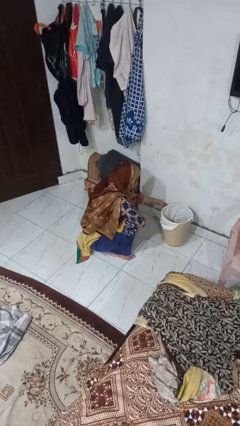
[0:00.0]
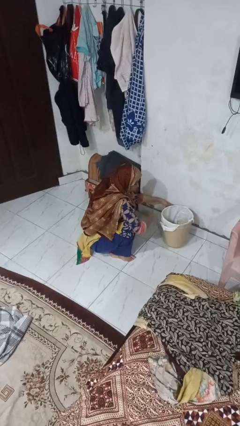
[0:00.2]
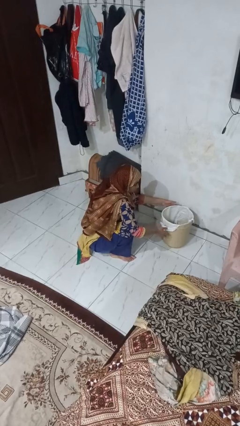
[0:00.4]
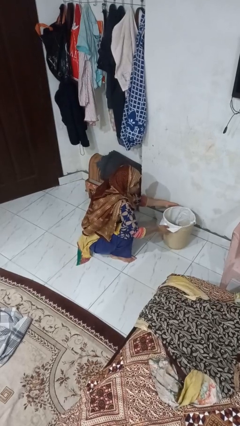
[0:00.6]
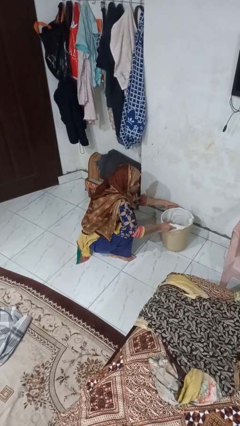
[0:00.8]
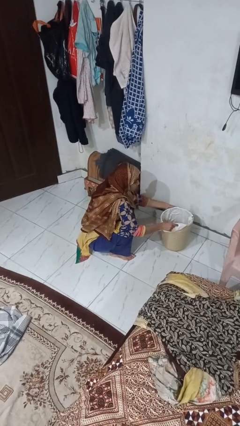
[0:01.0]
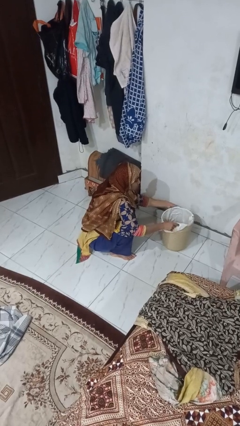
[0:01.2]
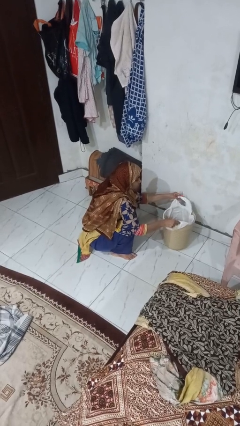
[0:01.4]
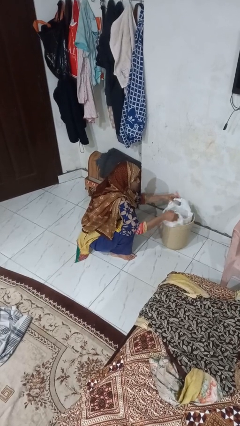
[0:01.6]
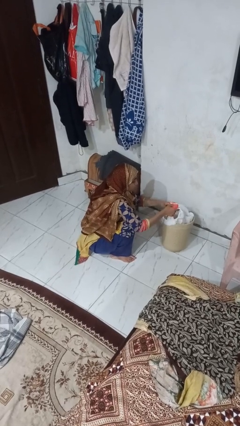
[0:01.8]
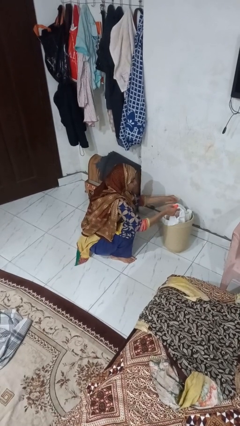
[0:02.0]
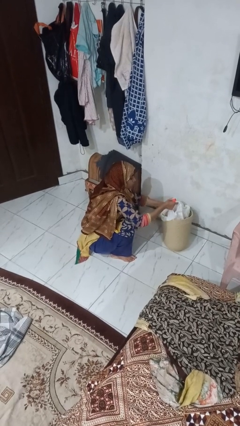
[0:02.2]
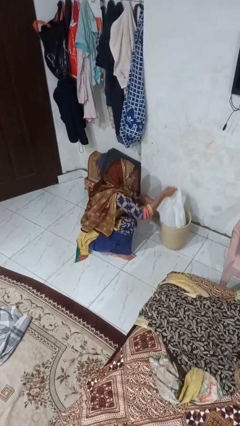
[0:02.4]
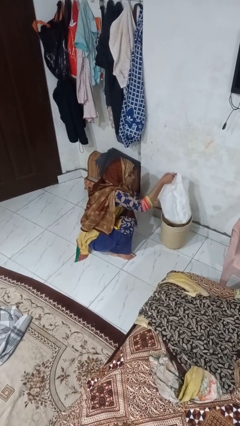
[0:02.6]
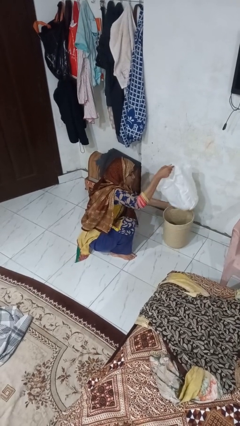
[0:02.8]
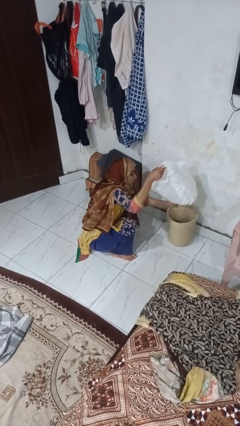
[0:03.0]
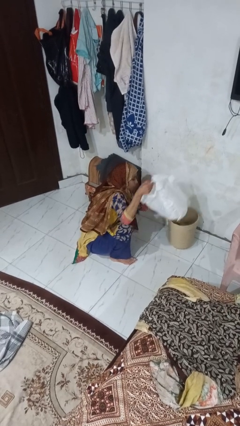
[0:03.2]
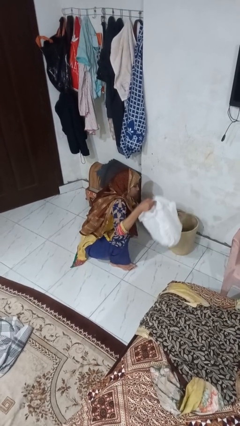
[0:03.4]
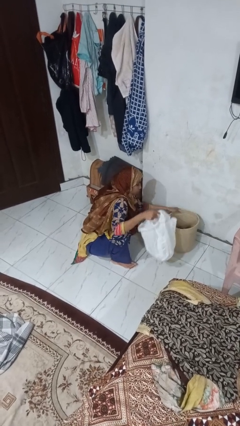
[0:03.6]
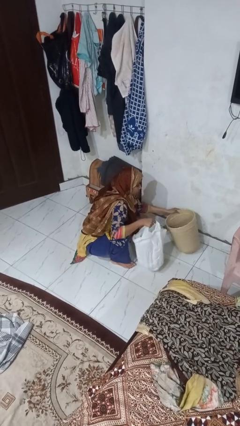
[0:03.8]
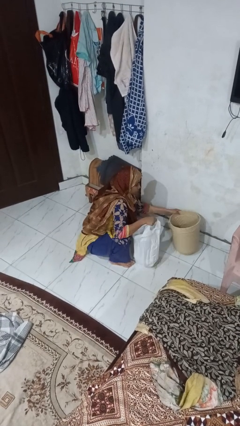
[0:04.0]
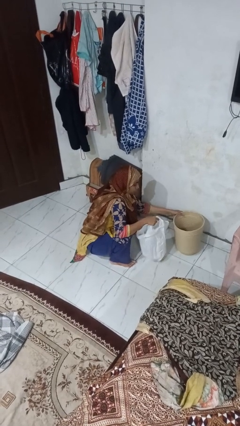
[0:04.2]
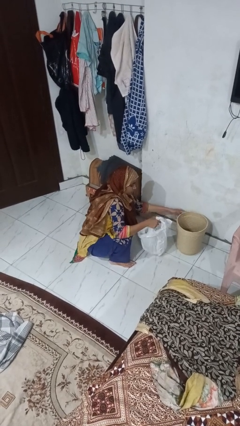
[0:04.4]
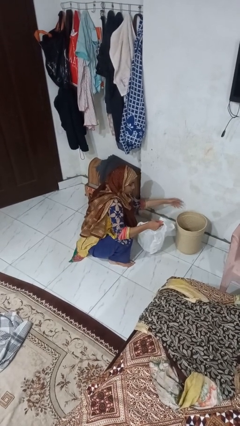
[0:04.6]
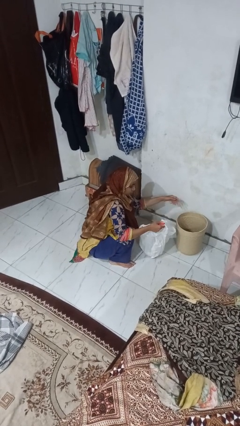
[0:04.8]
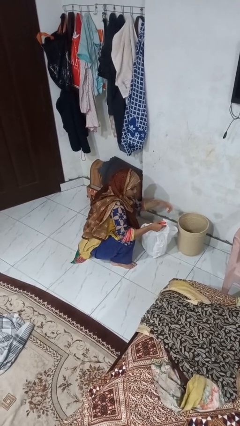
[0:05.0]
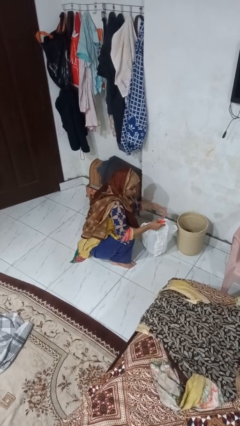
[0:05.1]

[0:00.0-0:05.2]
person removes trashbag from trashcan

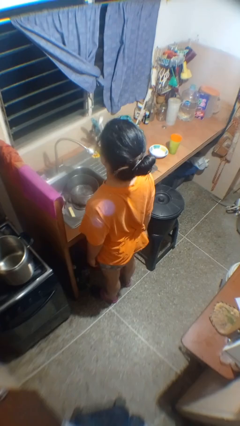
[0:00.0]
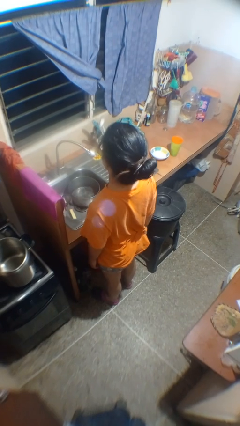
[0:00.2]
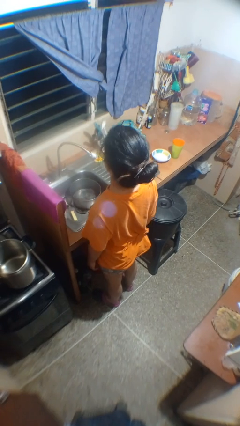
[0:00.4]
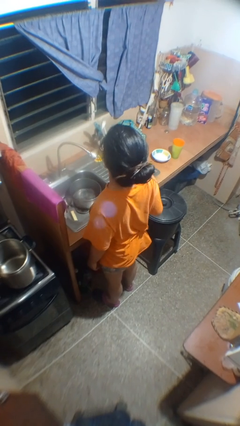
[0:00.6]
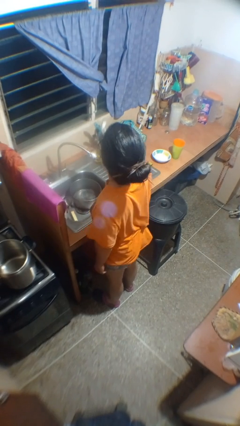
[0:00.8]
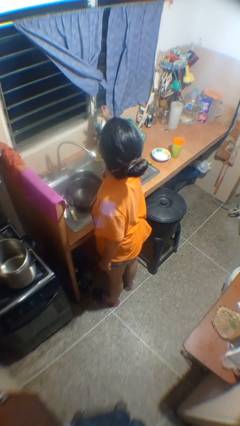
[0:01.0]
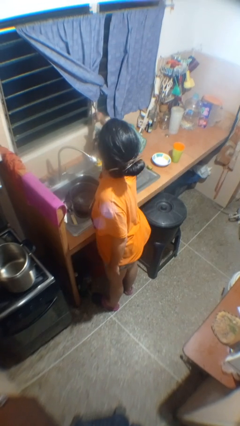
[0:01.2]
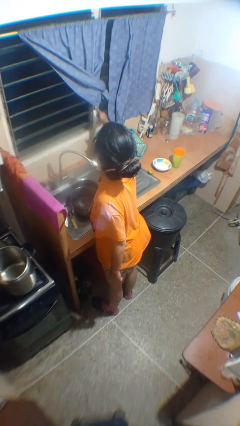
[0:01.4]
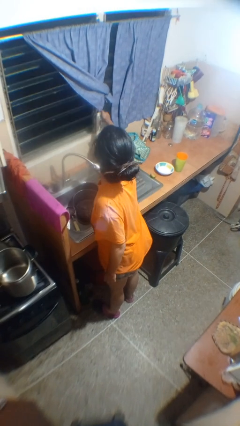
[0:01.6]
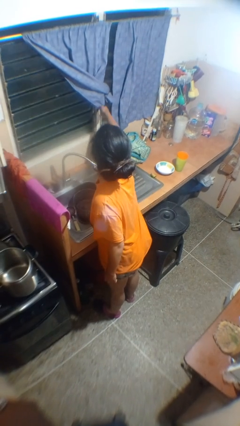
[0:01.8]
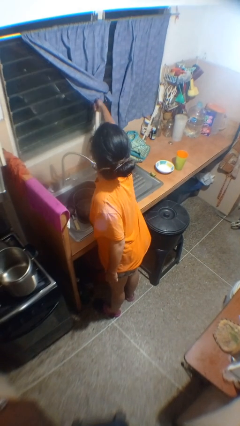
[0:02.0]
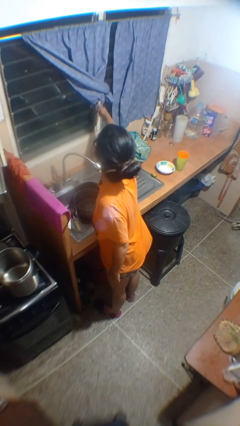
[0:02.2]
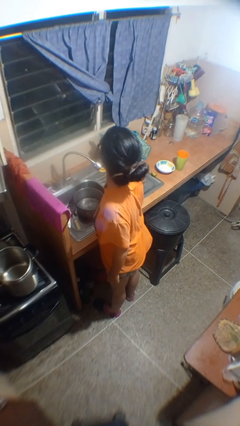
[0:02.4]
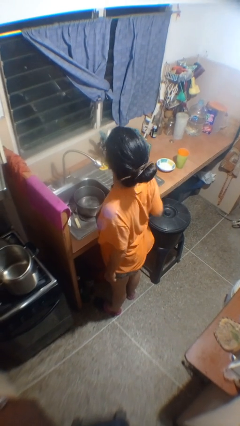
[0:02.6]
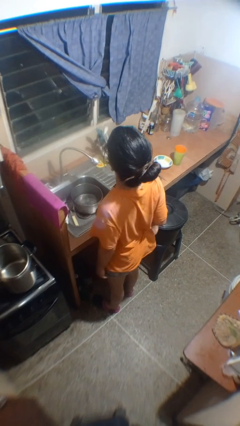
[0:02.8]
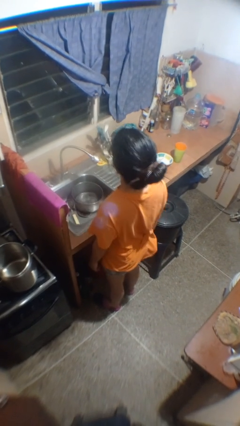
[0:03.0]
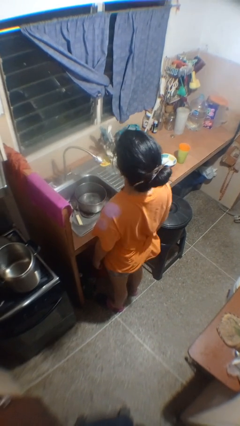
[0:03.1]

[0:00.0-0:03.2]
person closes home window

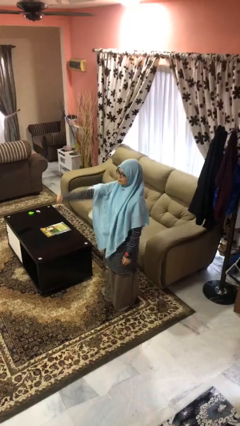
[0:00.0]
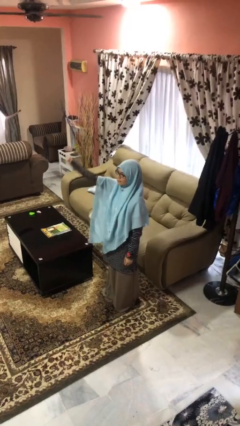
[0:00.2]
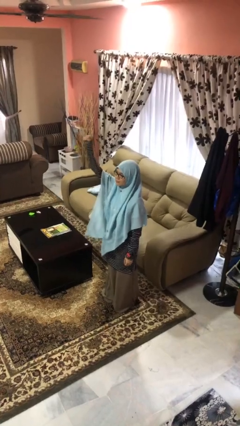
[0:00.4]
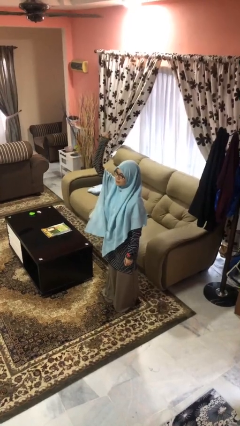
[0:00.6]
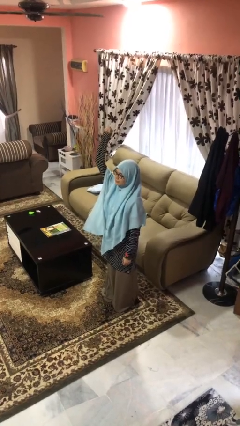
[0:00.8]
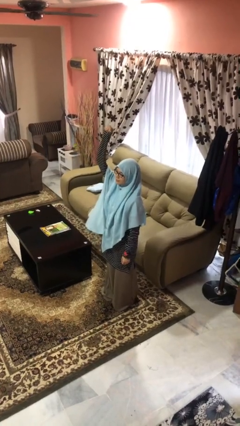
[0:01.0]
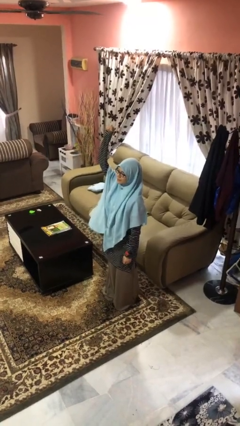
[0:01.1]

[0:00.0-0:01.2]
person gestures raise hand

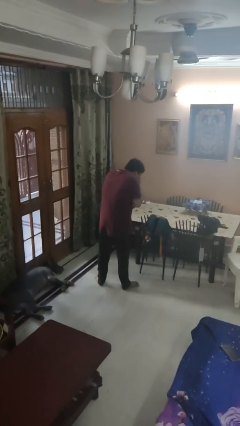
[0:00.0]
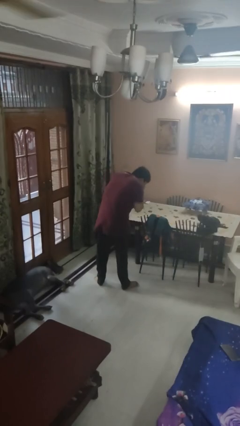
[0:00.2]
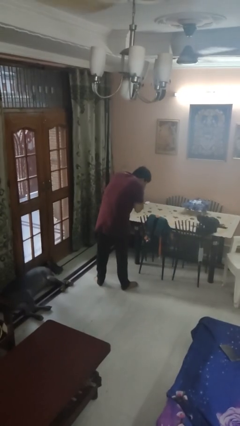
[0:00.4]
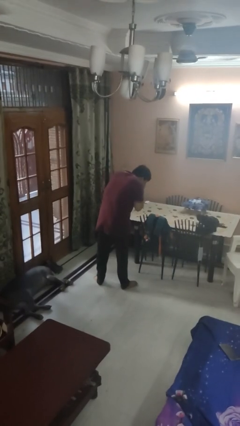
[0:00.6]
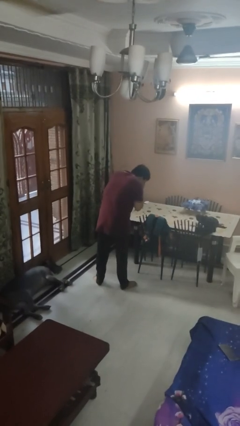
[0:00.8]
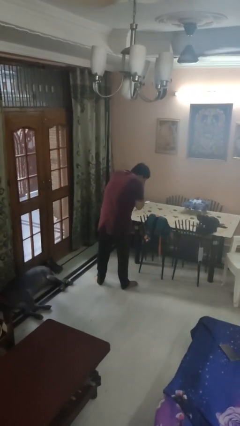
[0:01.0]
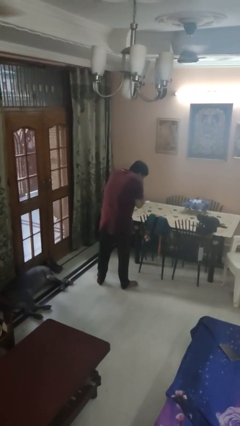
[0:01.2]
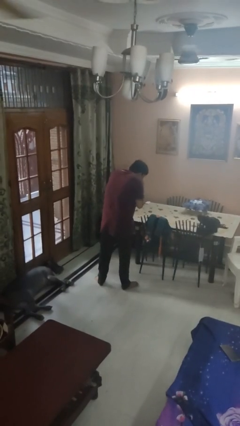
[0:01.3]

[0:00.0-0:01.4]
person sneezes into hand

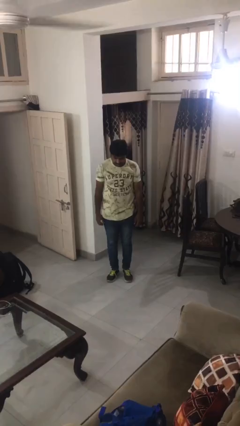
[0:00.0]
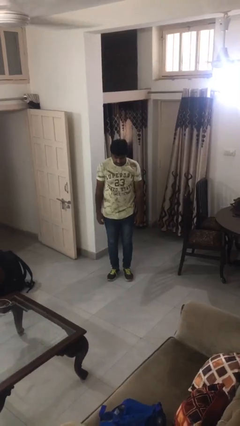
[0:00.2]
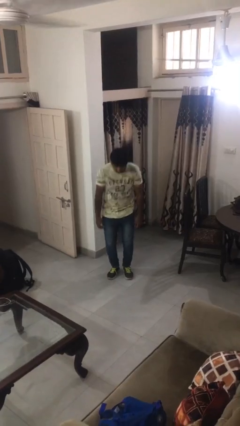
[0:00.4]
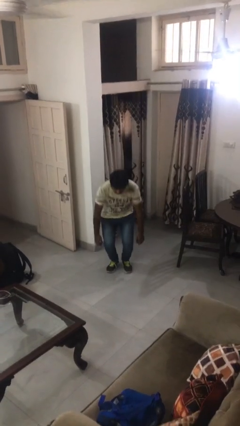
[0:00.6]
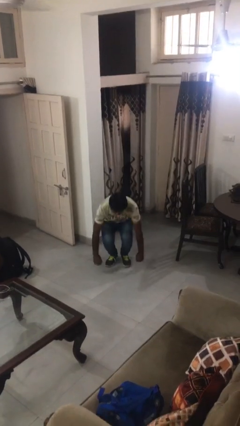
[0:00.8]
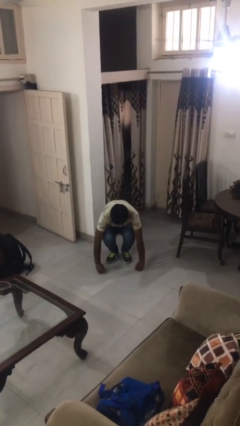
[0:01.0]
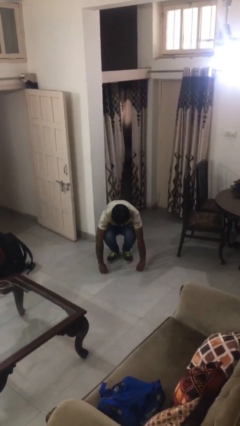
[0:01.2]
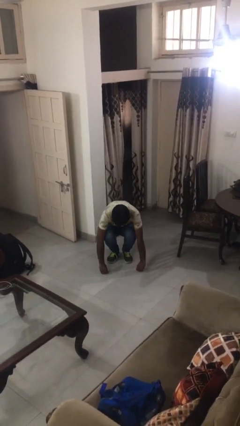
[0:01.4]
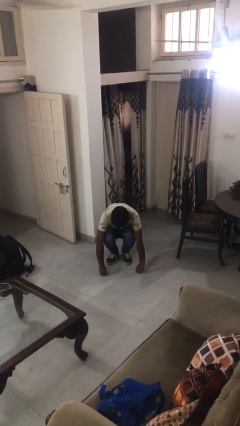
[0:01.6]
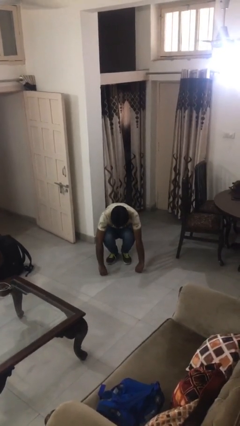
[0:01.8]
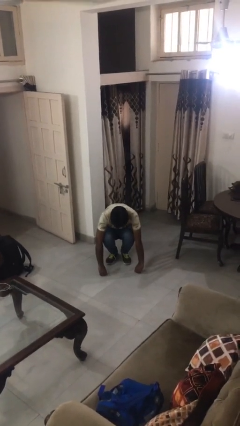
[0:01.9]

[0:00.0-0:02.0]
person squats

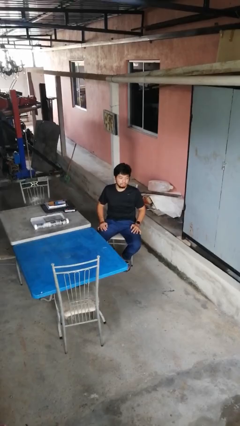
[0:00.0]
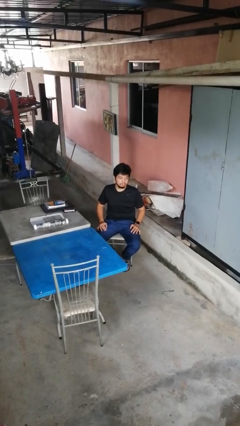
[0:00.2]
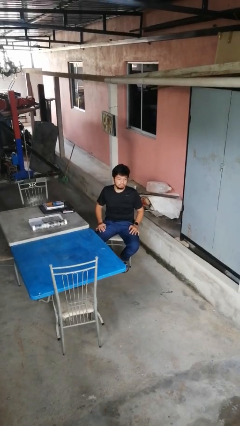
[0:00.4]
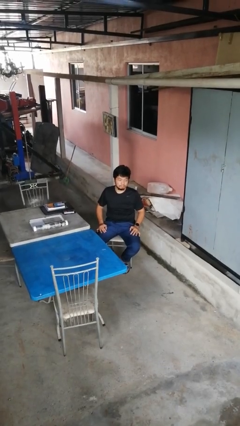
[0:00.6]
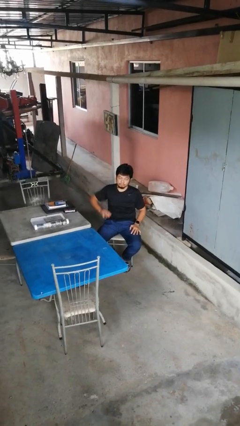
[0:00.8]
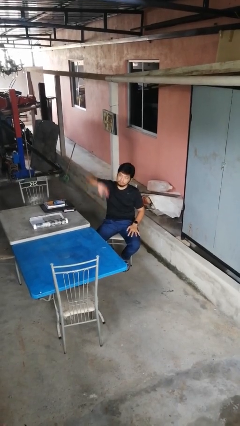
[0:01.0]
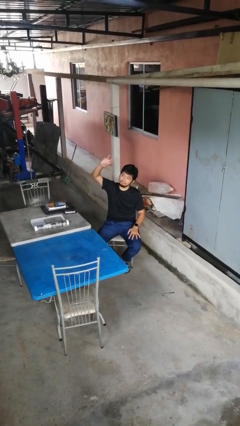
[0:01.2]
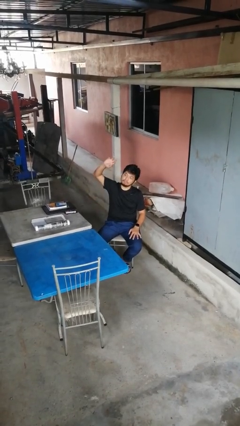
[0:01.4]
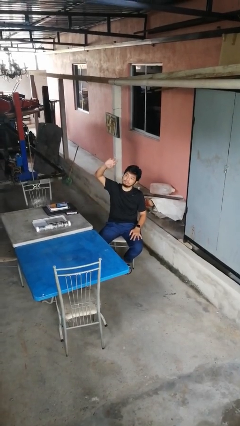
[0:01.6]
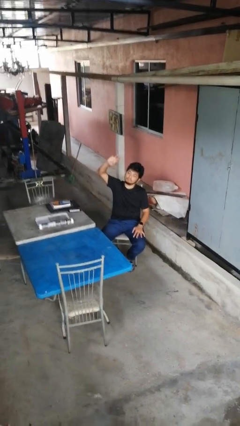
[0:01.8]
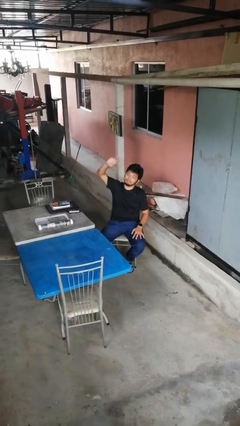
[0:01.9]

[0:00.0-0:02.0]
person gestures swipe up

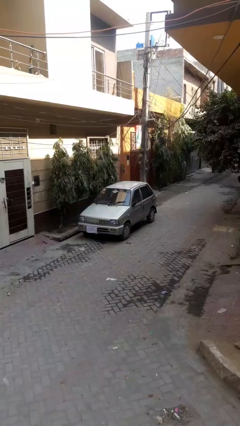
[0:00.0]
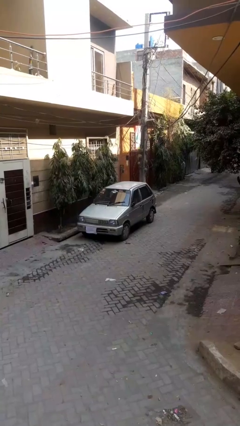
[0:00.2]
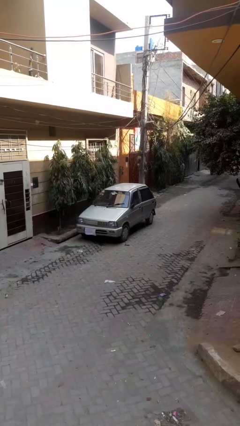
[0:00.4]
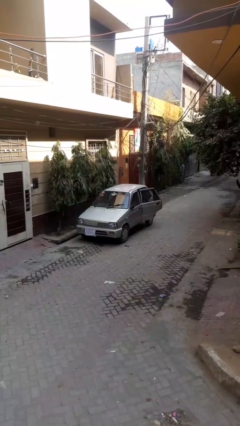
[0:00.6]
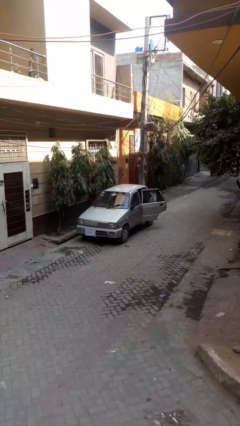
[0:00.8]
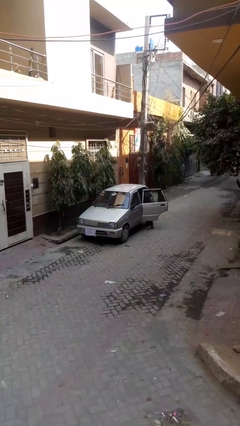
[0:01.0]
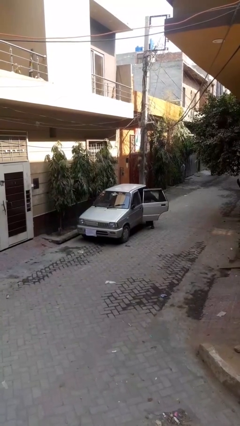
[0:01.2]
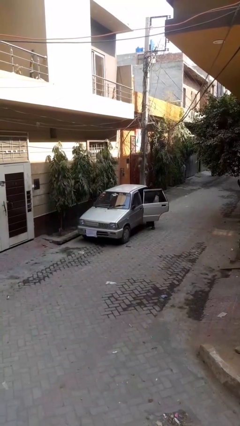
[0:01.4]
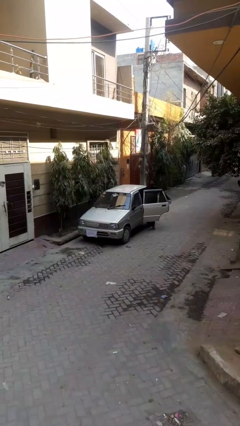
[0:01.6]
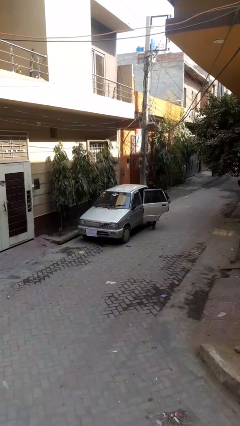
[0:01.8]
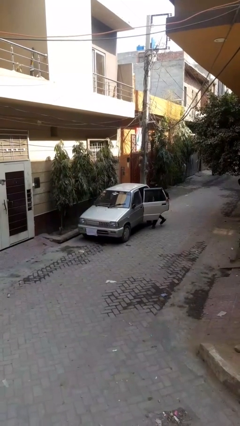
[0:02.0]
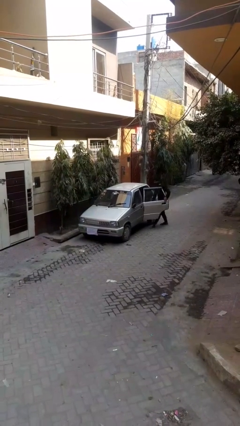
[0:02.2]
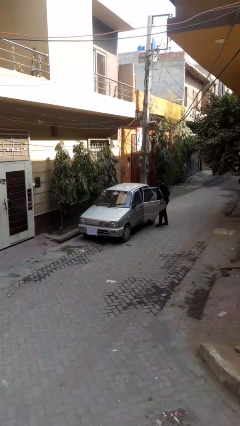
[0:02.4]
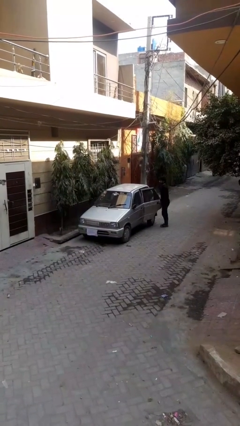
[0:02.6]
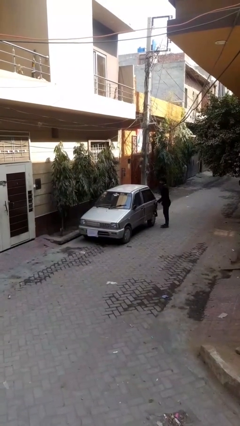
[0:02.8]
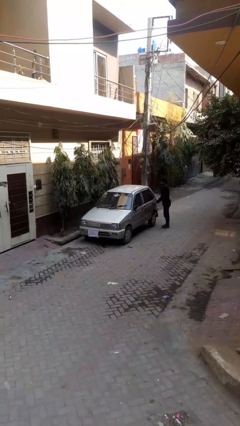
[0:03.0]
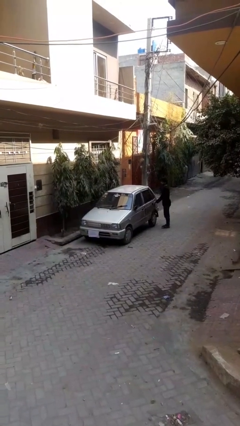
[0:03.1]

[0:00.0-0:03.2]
car drops off person
